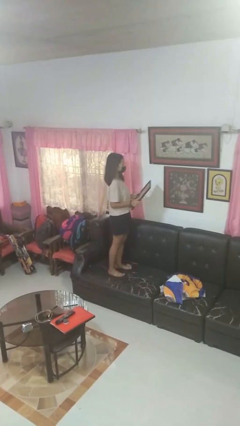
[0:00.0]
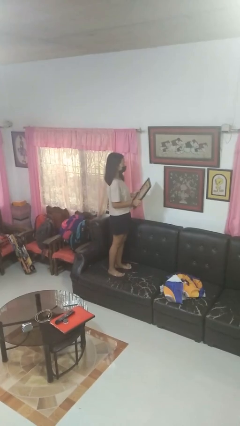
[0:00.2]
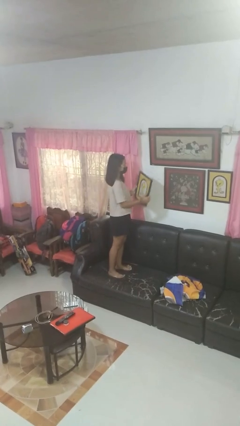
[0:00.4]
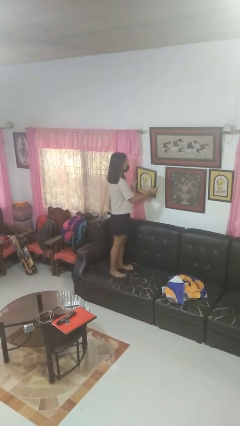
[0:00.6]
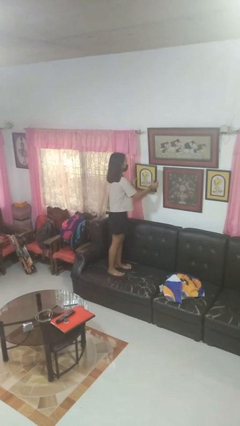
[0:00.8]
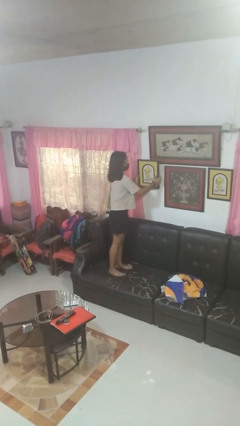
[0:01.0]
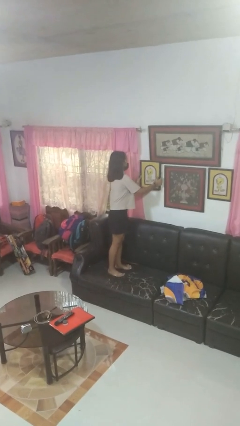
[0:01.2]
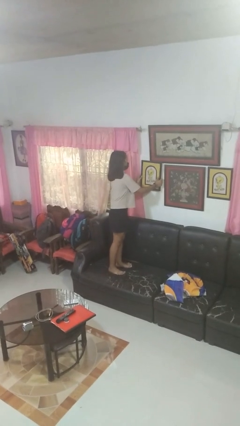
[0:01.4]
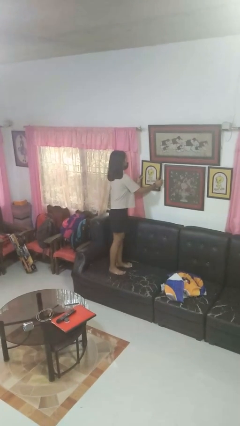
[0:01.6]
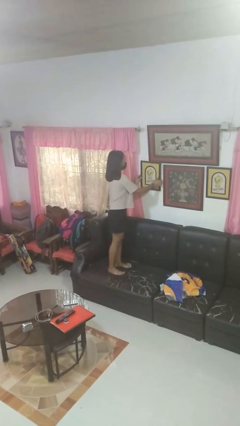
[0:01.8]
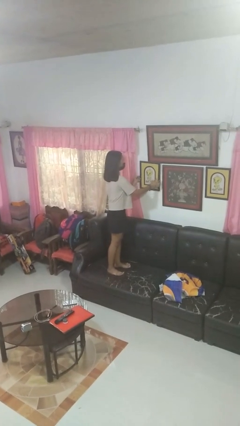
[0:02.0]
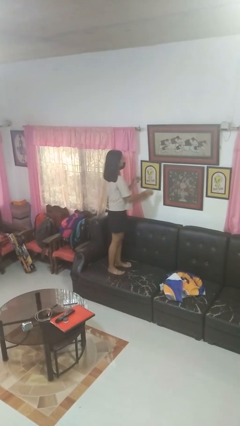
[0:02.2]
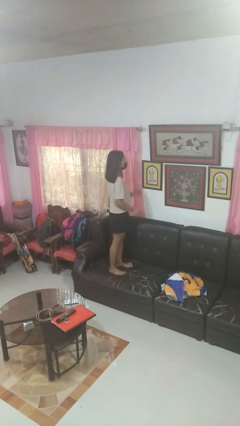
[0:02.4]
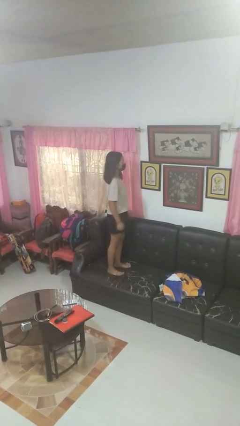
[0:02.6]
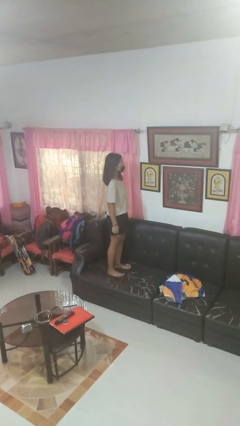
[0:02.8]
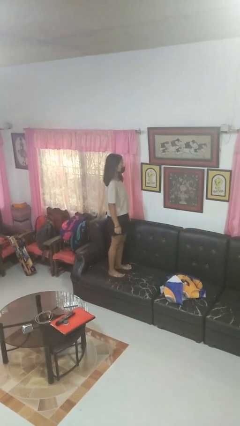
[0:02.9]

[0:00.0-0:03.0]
person puts up picture frame

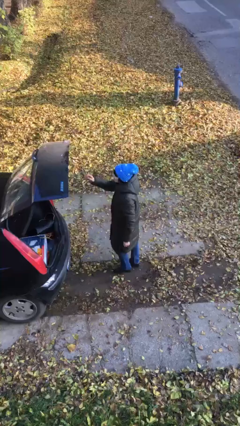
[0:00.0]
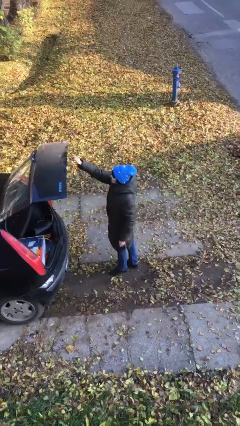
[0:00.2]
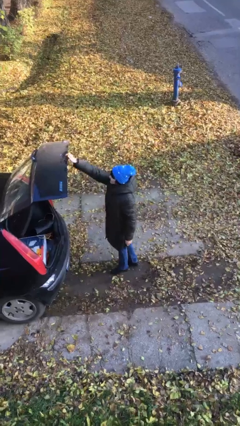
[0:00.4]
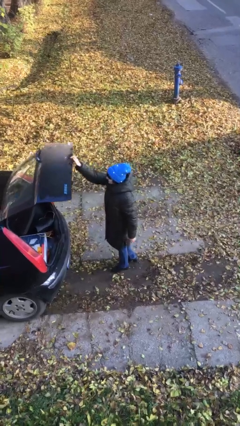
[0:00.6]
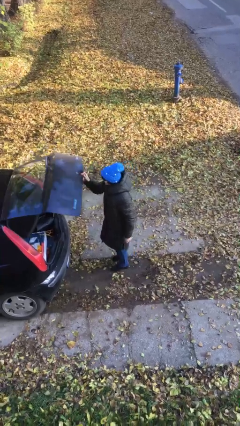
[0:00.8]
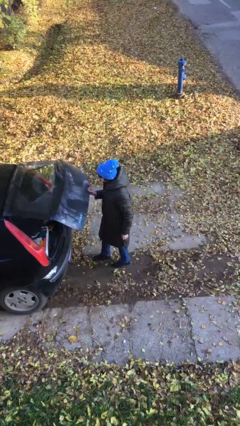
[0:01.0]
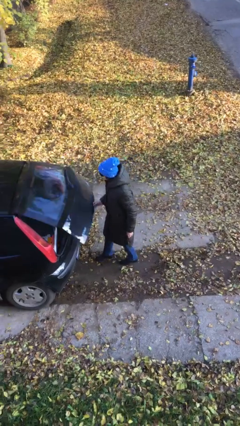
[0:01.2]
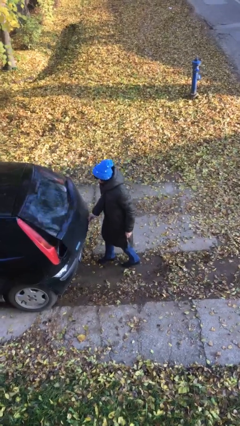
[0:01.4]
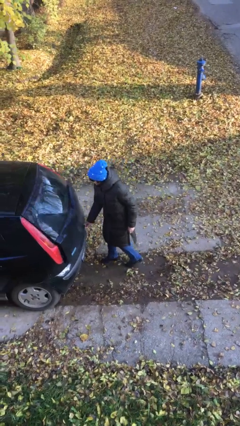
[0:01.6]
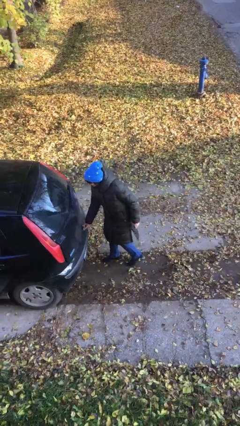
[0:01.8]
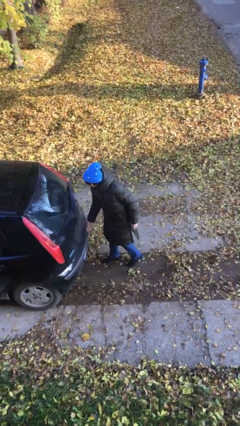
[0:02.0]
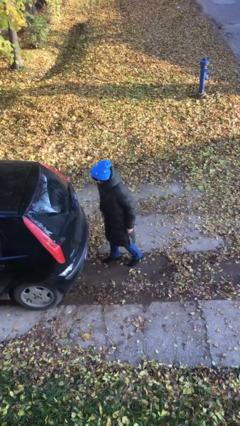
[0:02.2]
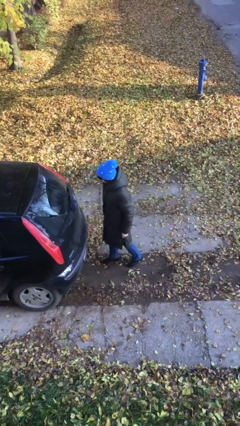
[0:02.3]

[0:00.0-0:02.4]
person closes car trunk

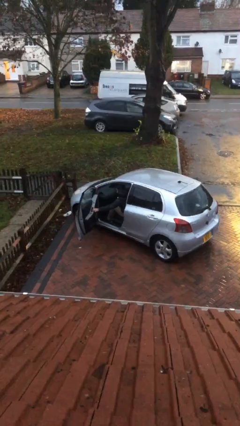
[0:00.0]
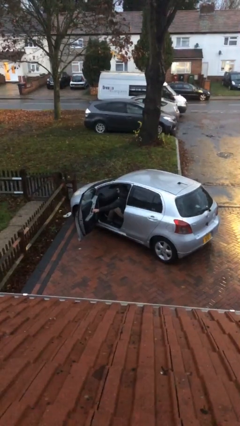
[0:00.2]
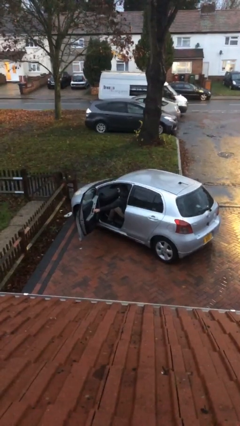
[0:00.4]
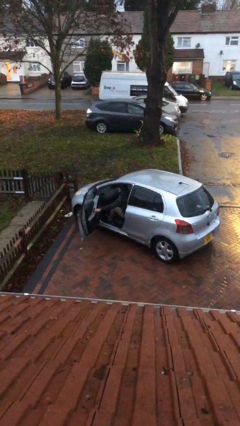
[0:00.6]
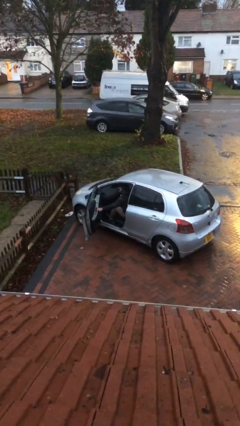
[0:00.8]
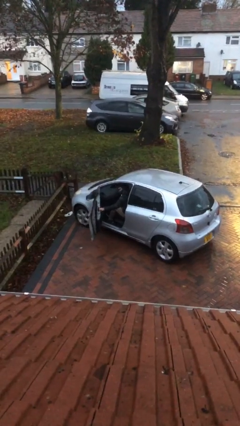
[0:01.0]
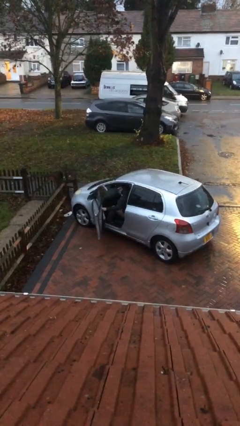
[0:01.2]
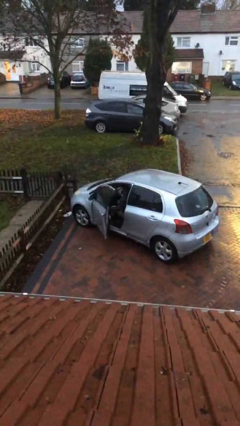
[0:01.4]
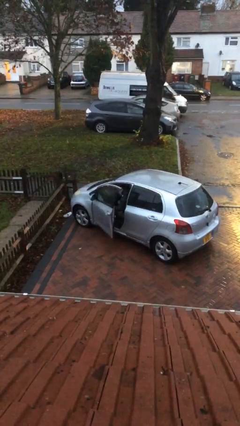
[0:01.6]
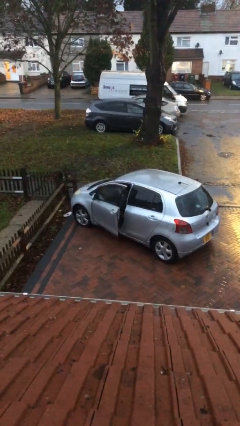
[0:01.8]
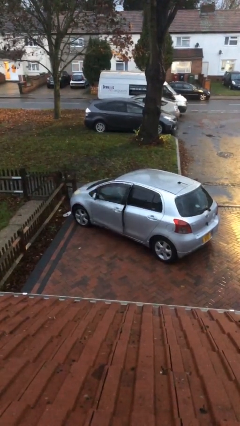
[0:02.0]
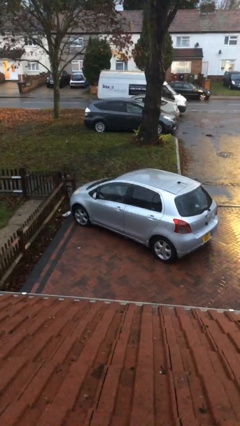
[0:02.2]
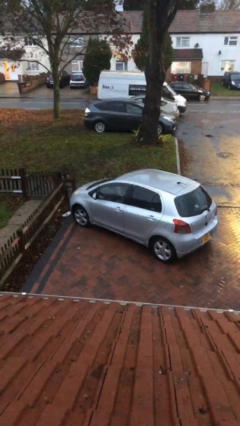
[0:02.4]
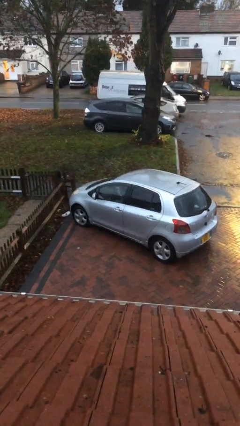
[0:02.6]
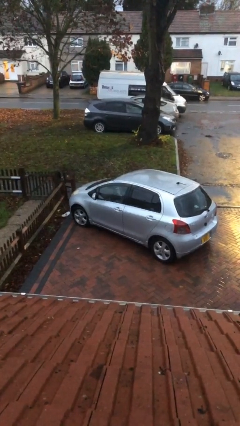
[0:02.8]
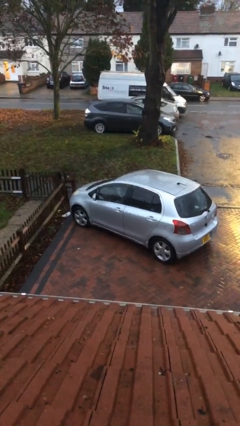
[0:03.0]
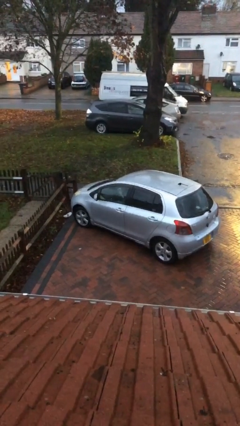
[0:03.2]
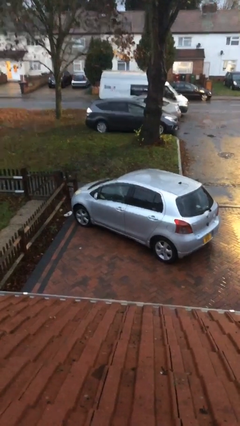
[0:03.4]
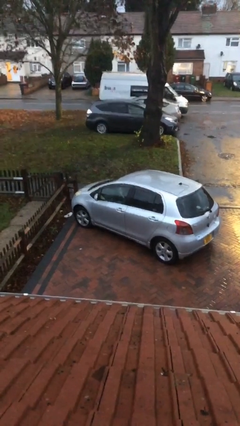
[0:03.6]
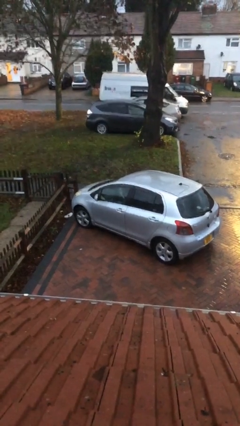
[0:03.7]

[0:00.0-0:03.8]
person closes car door

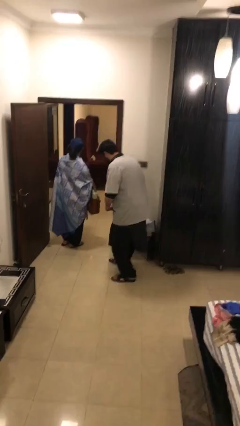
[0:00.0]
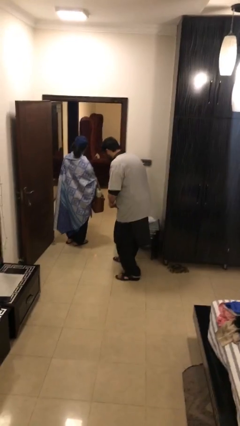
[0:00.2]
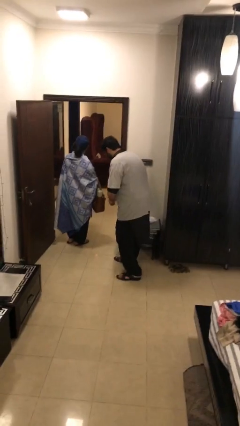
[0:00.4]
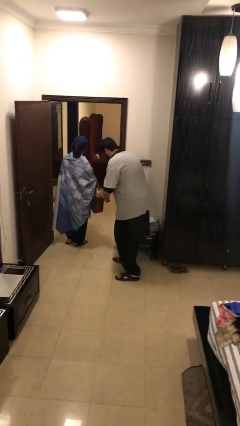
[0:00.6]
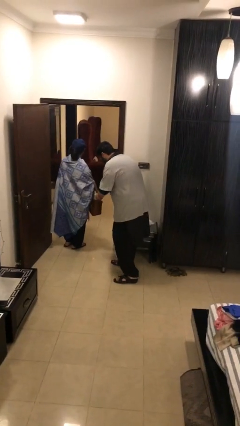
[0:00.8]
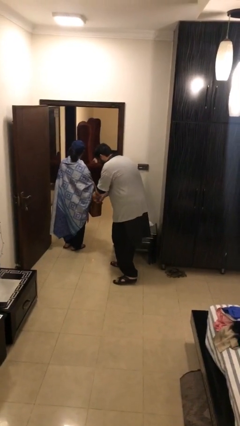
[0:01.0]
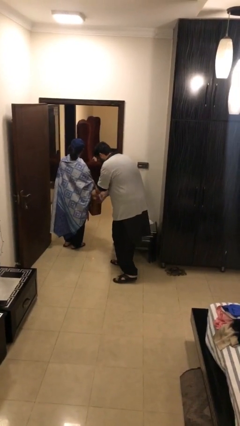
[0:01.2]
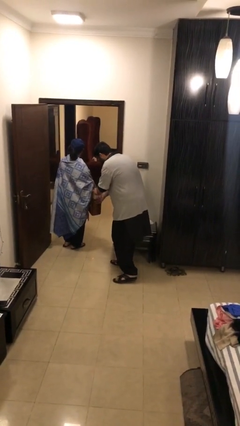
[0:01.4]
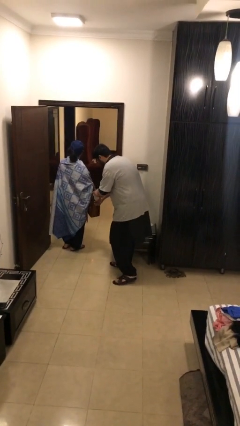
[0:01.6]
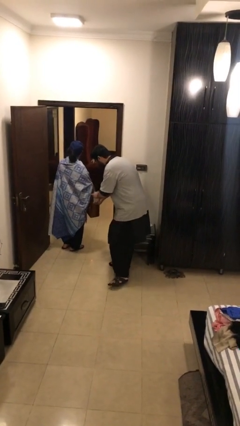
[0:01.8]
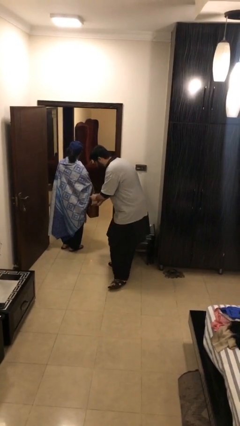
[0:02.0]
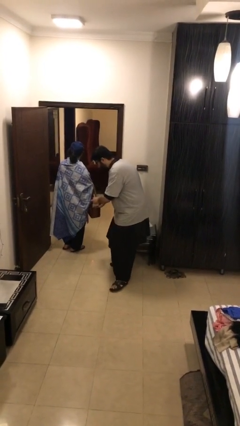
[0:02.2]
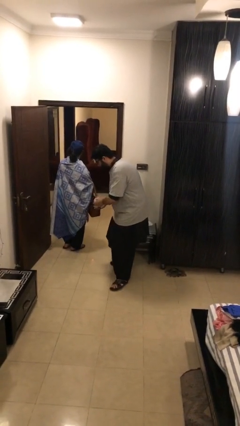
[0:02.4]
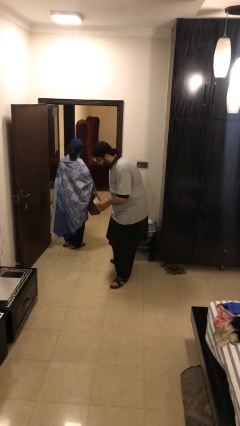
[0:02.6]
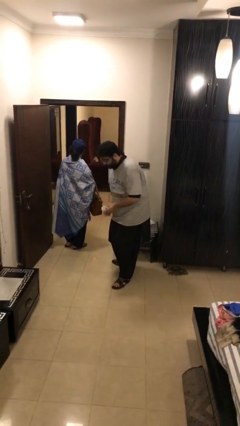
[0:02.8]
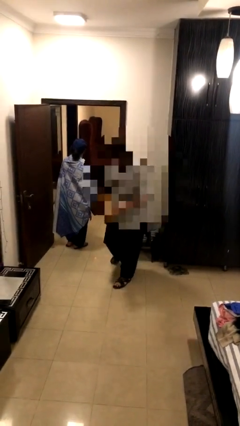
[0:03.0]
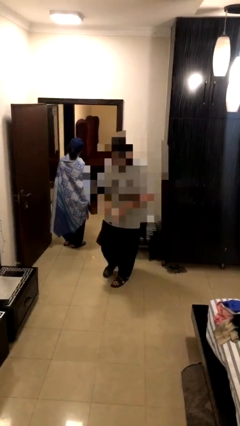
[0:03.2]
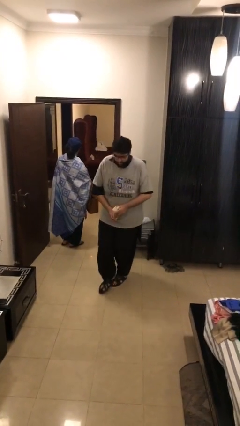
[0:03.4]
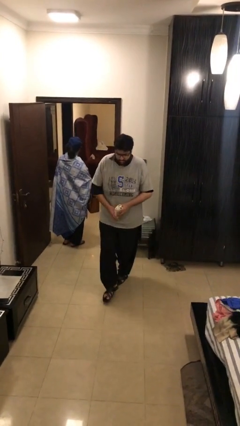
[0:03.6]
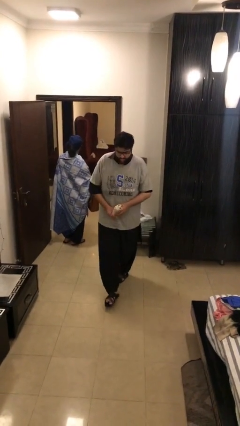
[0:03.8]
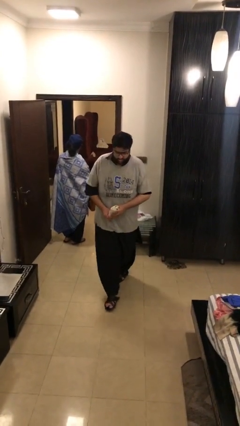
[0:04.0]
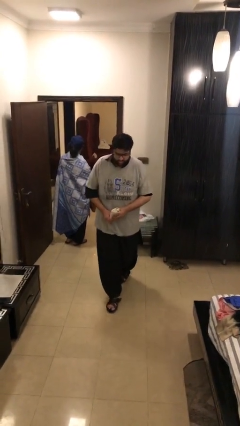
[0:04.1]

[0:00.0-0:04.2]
person steals object from person

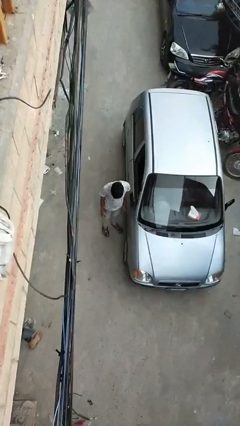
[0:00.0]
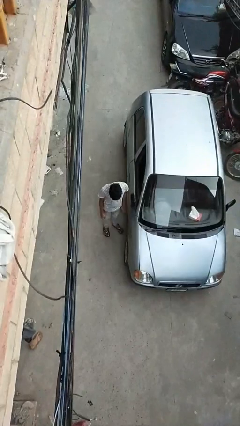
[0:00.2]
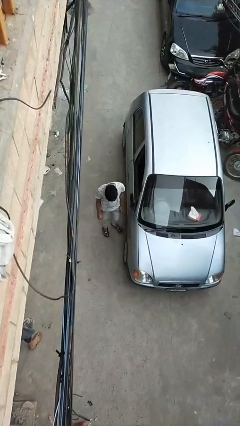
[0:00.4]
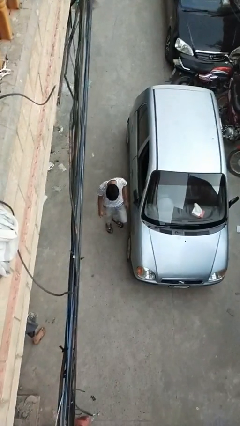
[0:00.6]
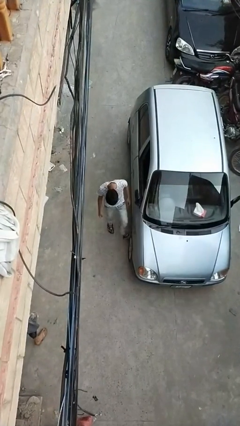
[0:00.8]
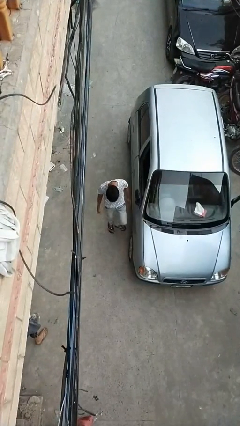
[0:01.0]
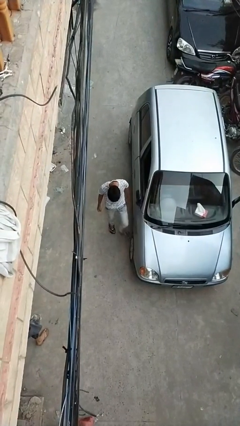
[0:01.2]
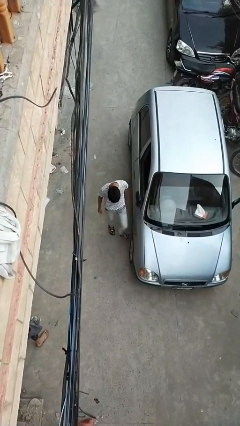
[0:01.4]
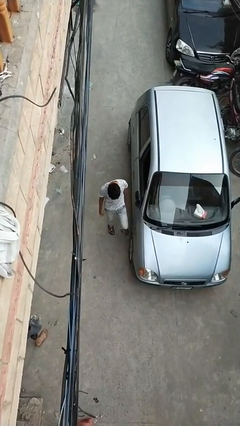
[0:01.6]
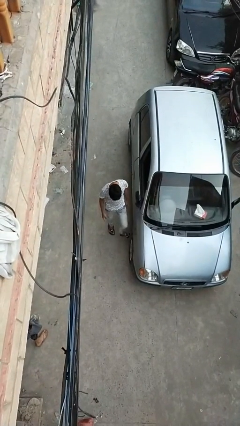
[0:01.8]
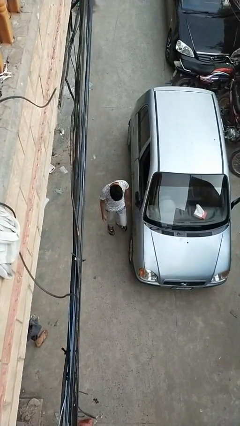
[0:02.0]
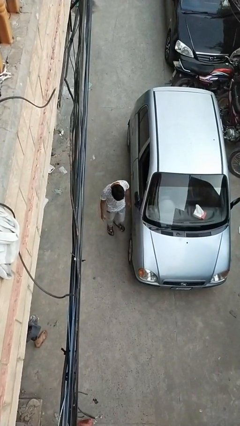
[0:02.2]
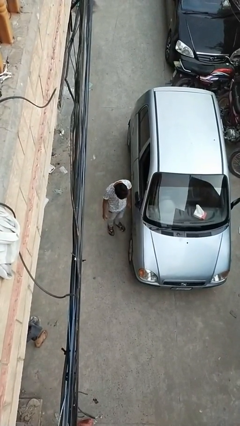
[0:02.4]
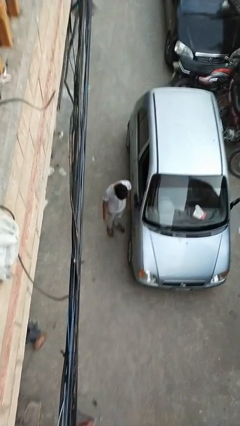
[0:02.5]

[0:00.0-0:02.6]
person kicks car tires

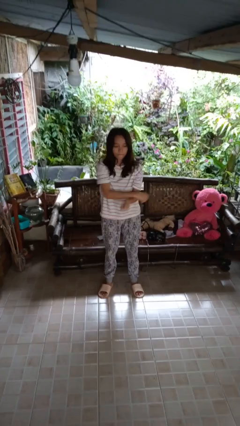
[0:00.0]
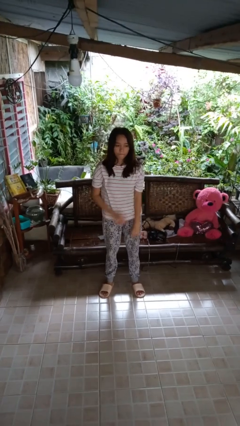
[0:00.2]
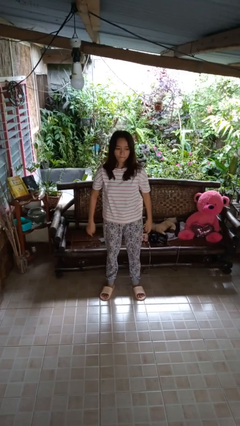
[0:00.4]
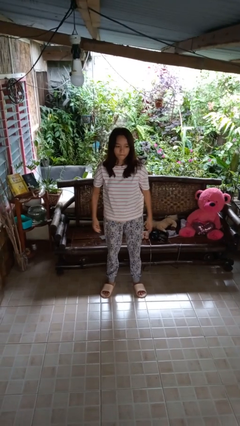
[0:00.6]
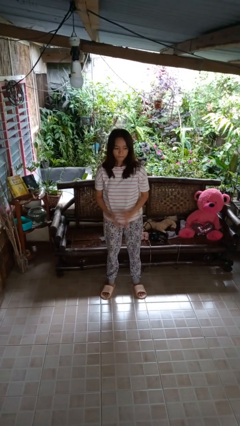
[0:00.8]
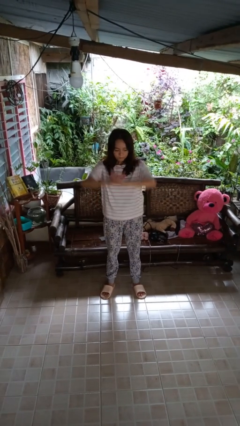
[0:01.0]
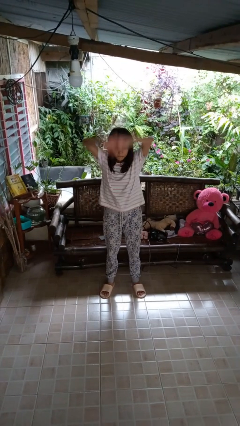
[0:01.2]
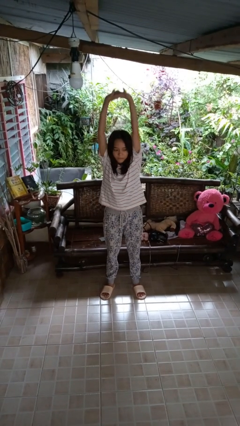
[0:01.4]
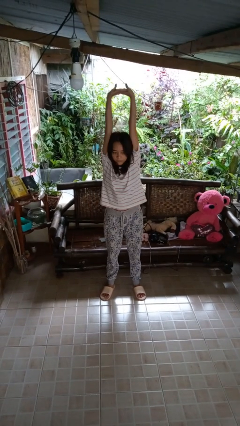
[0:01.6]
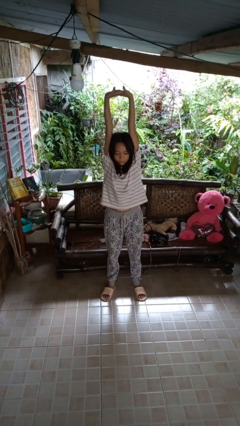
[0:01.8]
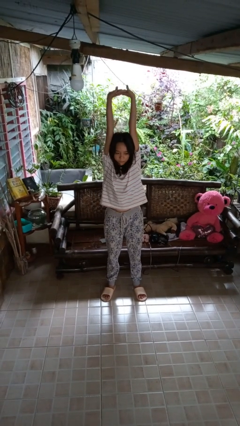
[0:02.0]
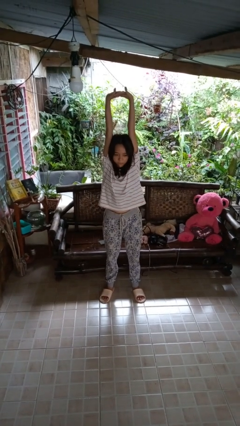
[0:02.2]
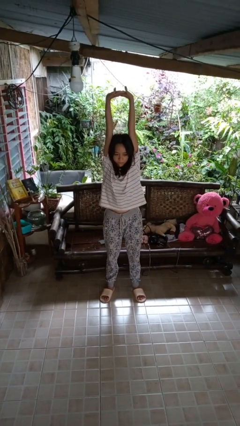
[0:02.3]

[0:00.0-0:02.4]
person stretches arms over head
